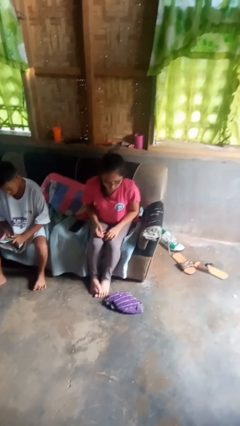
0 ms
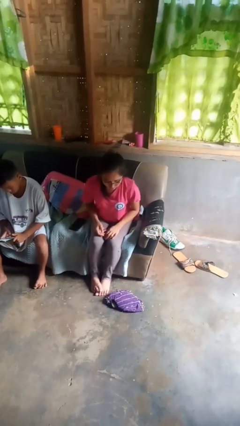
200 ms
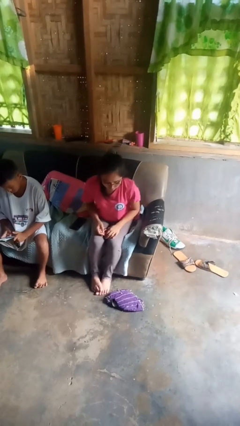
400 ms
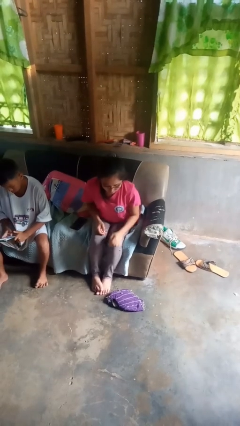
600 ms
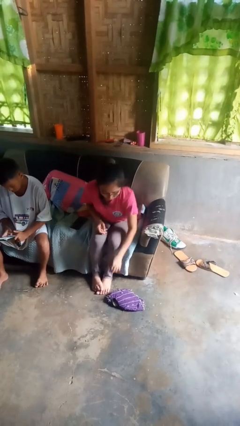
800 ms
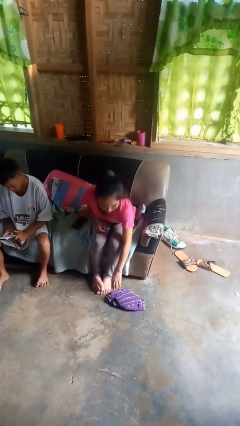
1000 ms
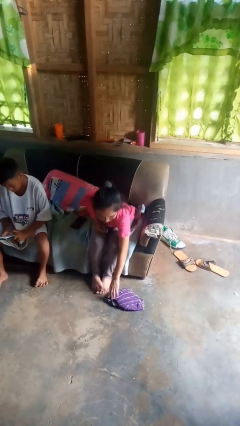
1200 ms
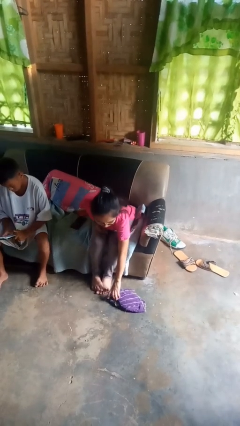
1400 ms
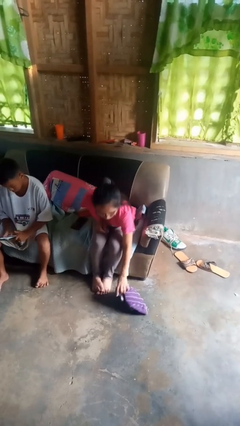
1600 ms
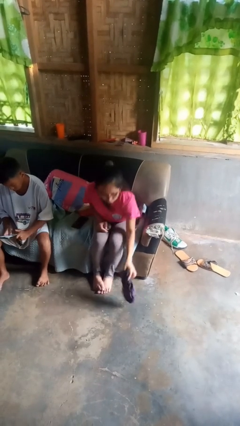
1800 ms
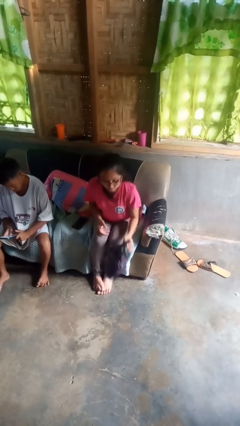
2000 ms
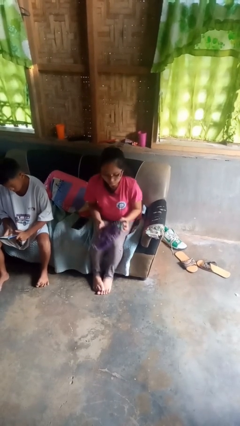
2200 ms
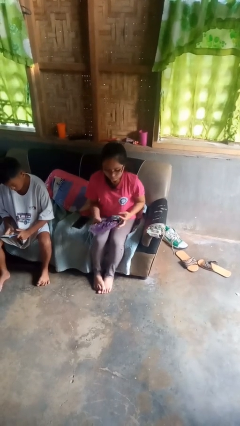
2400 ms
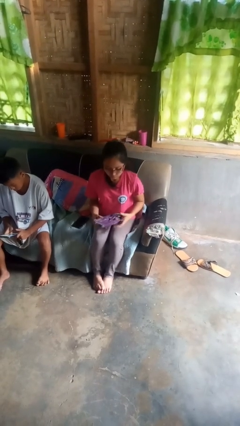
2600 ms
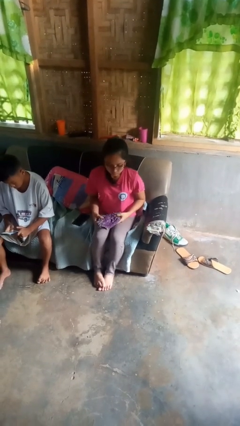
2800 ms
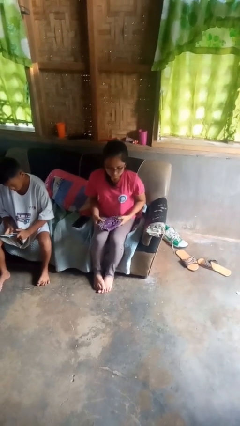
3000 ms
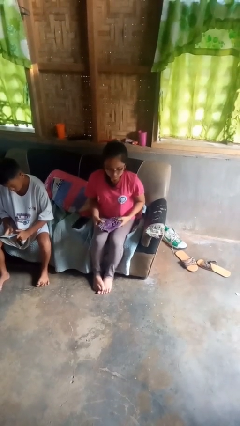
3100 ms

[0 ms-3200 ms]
person picks up object from floor

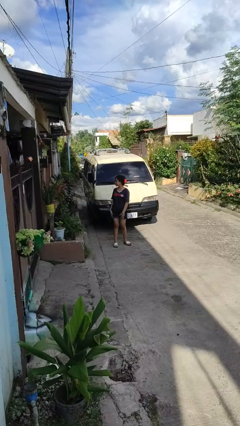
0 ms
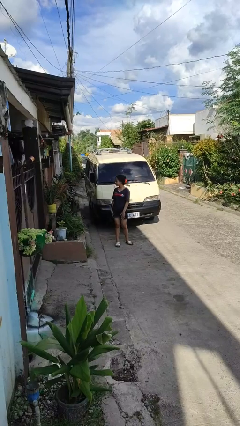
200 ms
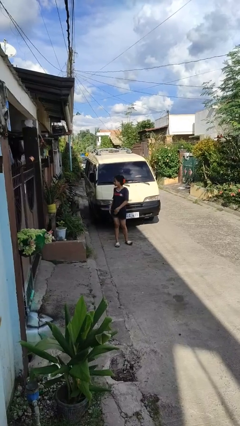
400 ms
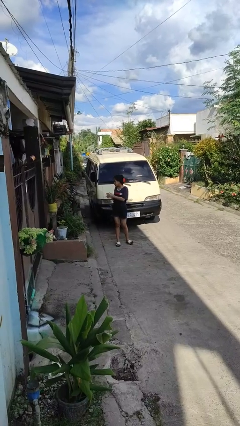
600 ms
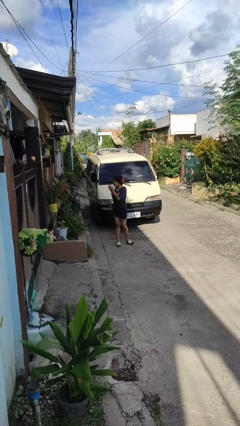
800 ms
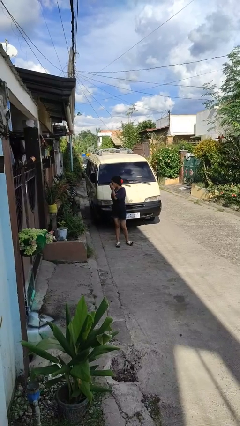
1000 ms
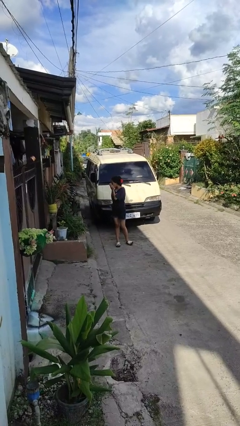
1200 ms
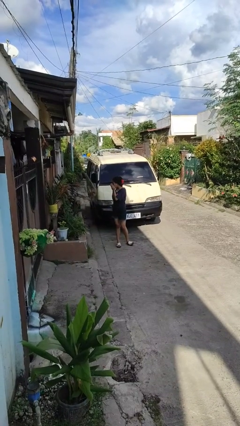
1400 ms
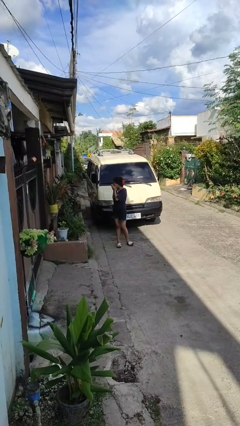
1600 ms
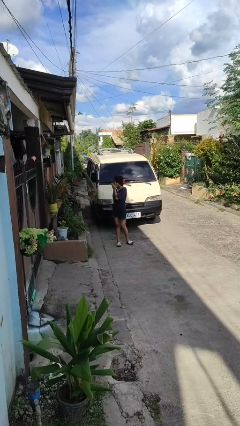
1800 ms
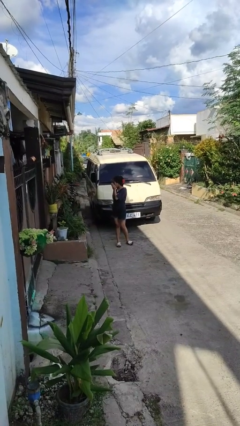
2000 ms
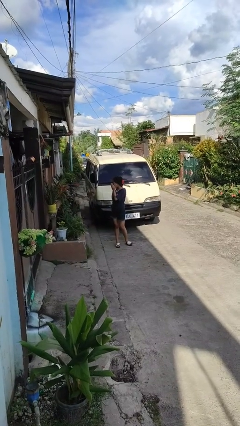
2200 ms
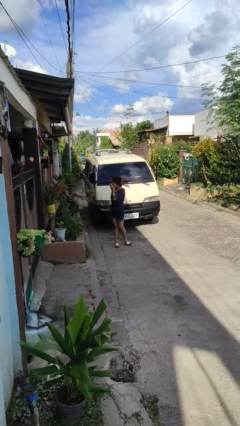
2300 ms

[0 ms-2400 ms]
person blows into hands

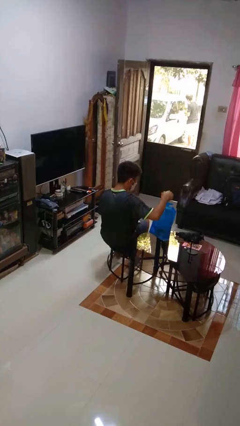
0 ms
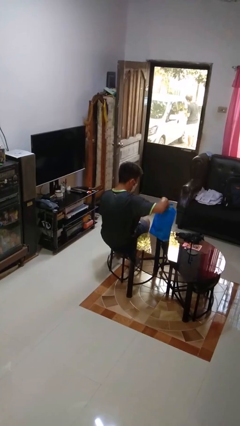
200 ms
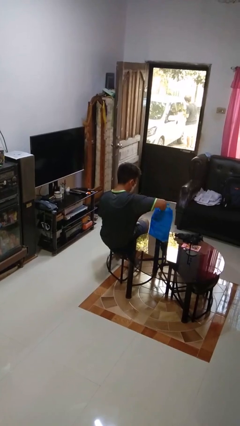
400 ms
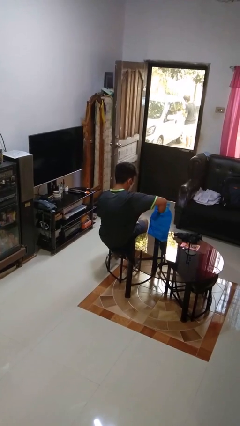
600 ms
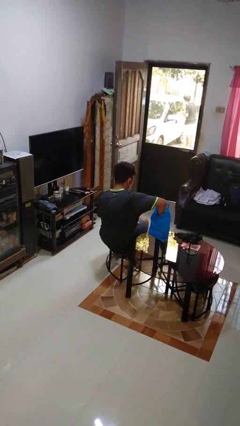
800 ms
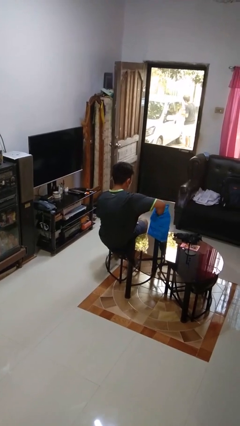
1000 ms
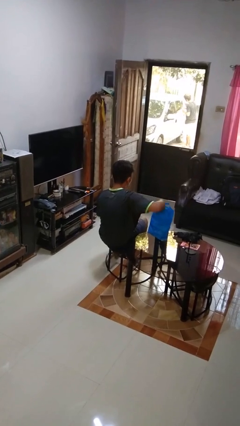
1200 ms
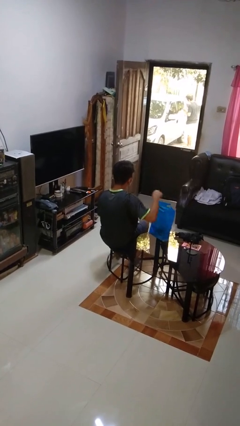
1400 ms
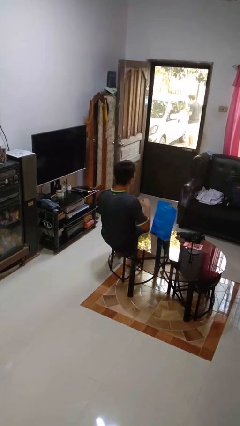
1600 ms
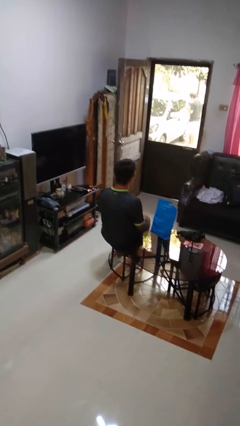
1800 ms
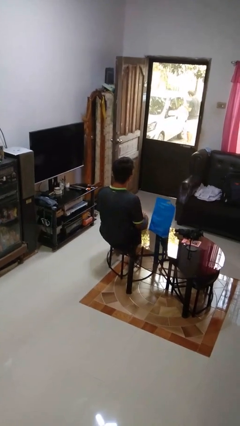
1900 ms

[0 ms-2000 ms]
person puts object into bag

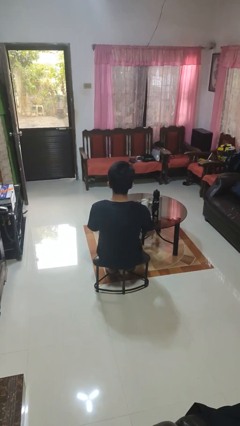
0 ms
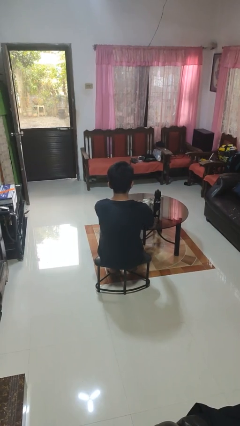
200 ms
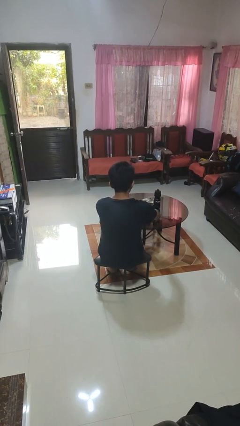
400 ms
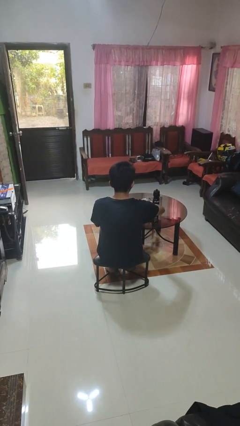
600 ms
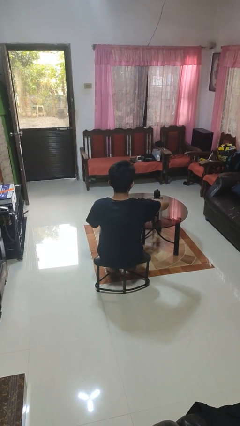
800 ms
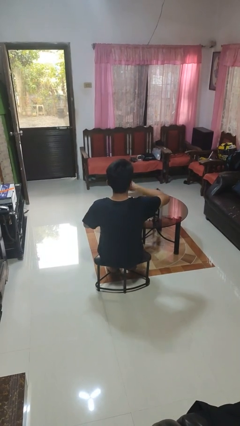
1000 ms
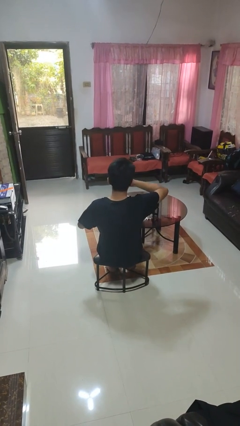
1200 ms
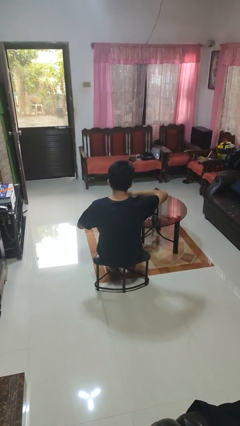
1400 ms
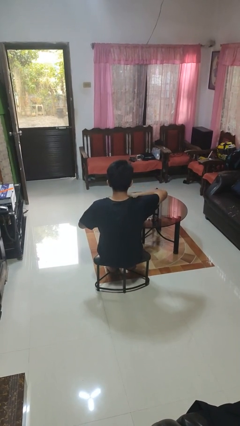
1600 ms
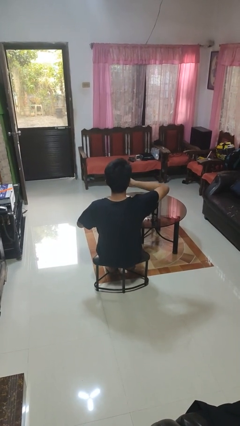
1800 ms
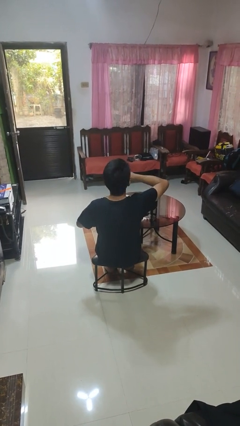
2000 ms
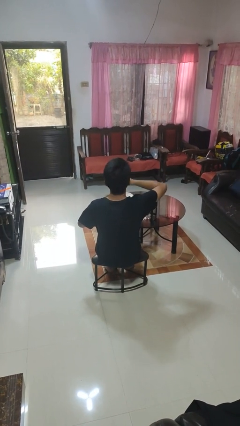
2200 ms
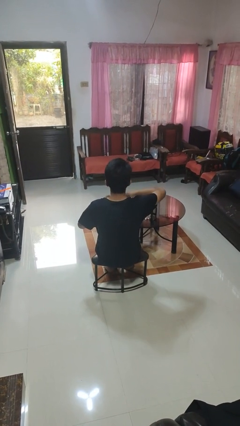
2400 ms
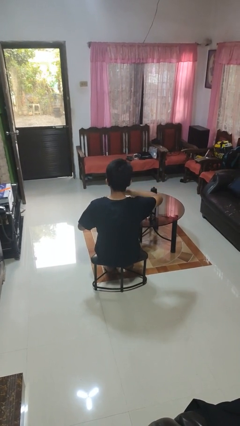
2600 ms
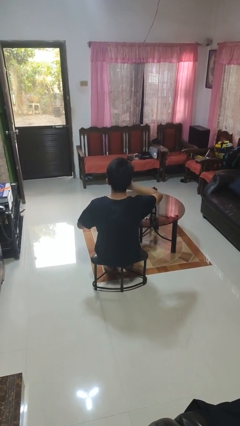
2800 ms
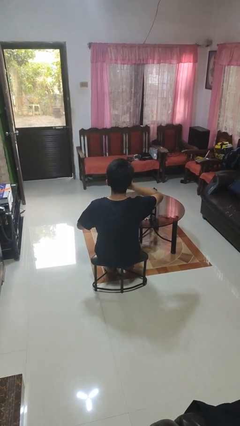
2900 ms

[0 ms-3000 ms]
person eats with hands

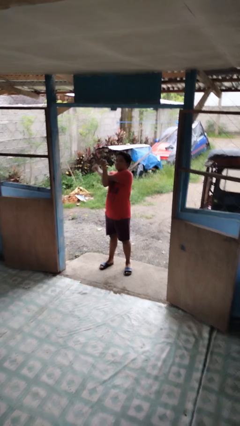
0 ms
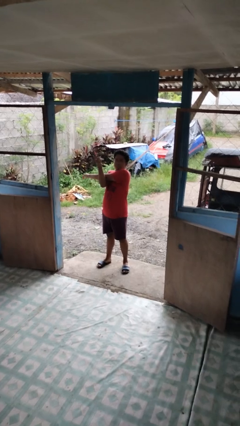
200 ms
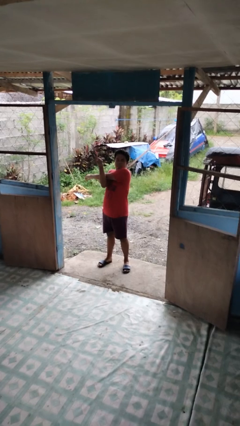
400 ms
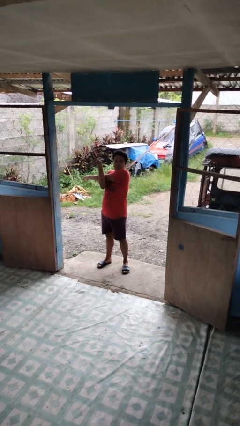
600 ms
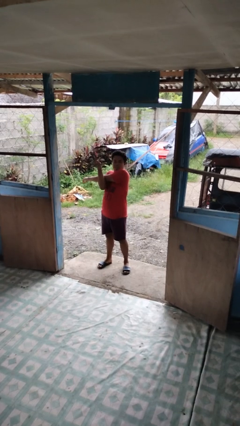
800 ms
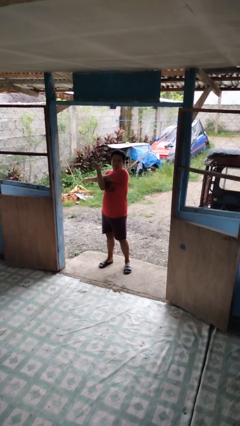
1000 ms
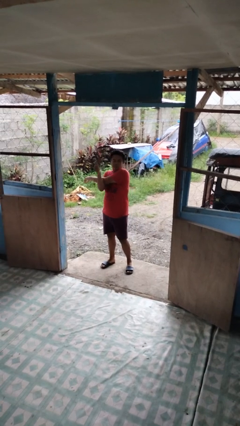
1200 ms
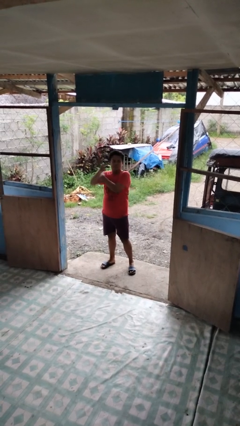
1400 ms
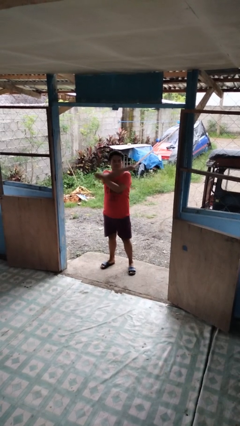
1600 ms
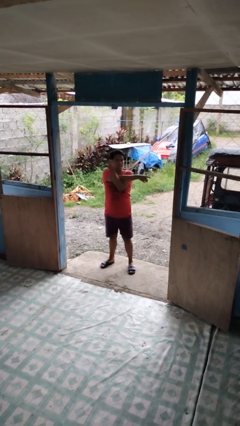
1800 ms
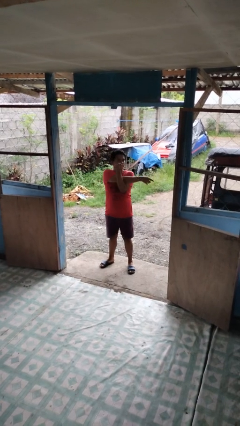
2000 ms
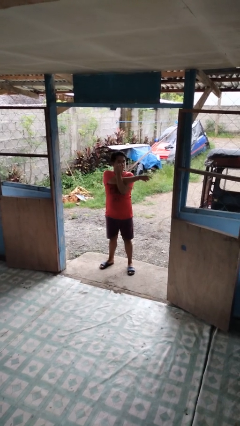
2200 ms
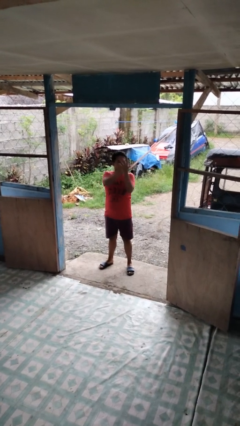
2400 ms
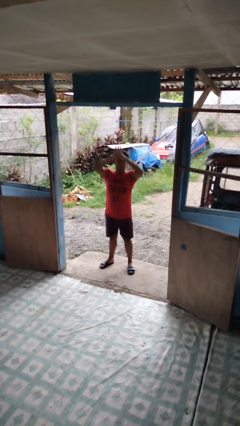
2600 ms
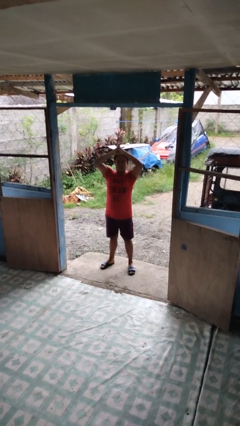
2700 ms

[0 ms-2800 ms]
person stretches arms to side

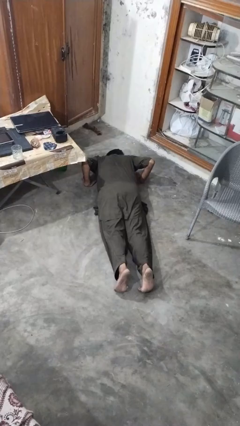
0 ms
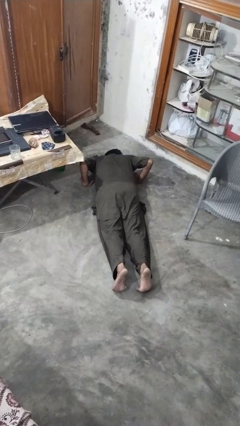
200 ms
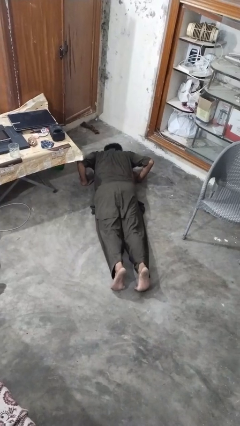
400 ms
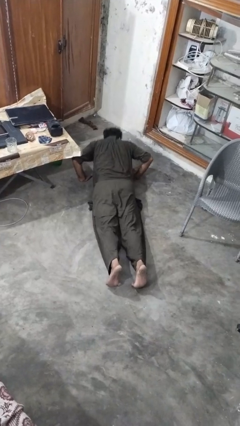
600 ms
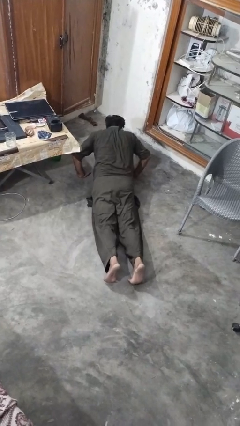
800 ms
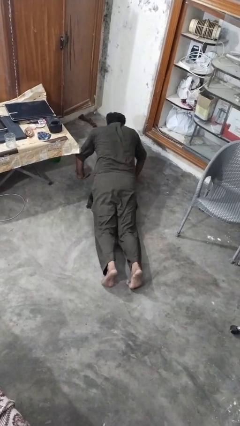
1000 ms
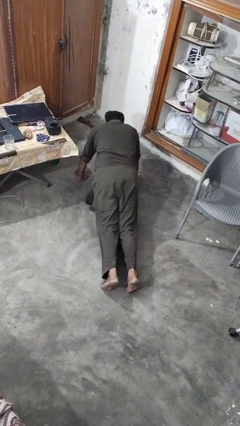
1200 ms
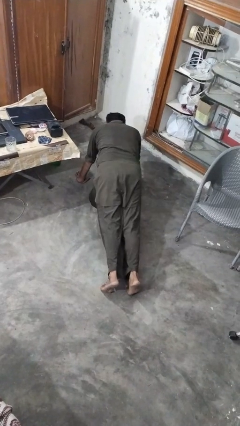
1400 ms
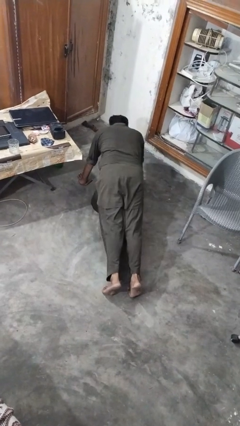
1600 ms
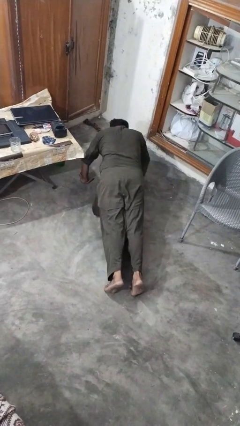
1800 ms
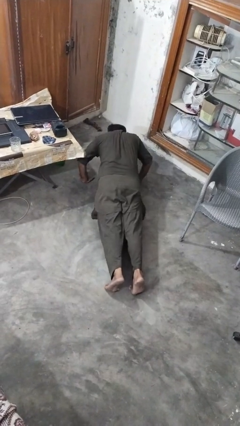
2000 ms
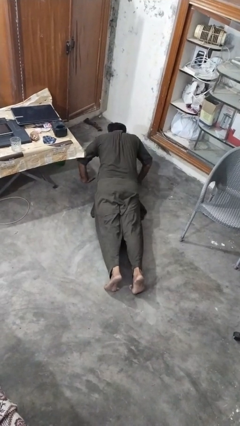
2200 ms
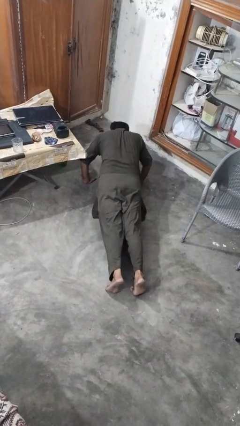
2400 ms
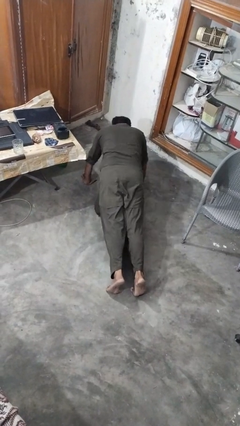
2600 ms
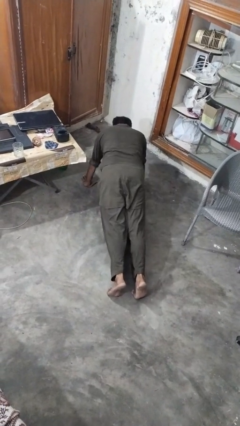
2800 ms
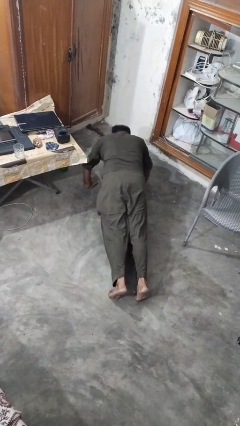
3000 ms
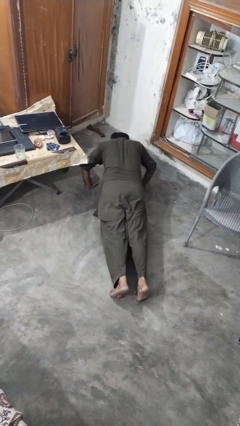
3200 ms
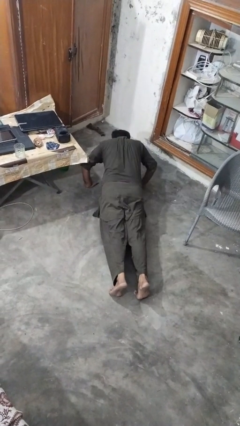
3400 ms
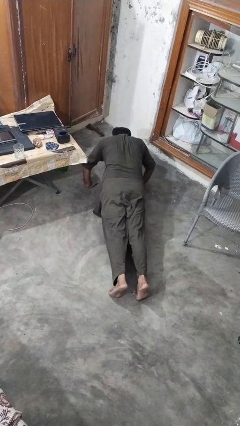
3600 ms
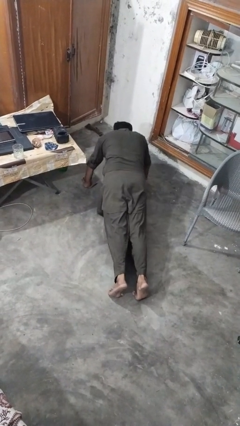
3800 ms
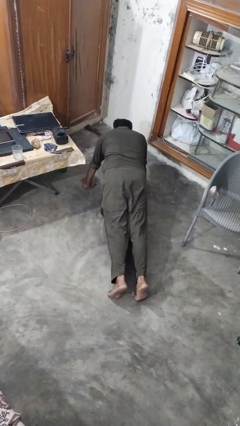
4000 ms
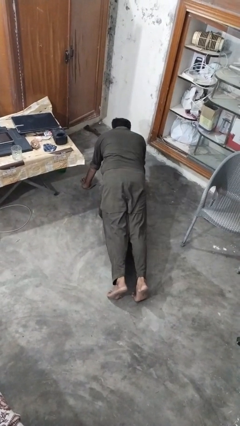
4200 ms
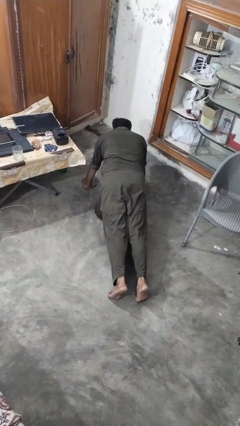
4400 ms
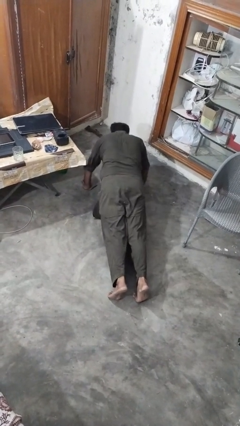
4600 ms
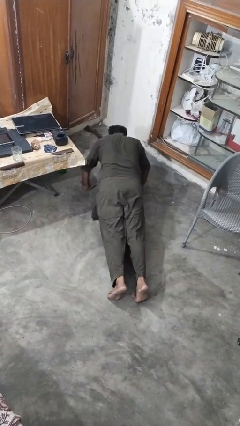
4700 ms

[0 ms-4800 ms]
person exercises with pushup
